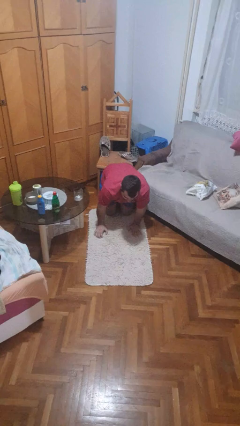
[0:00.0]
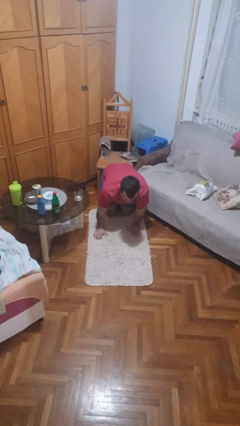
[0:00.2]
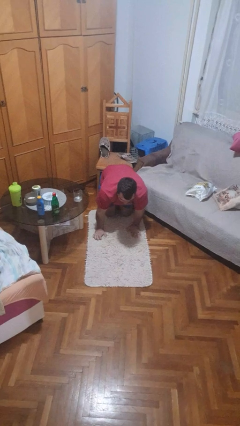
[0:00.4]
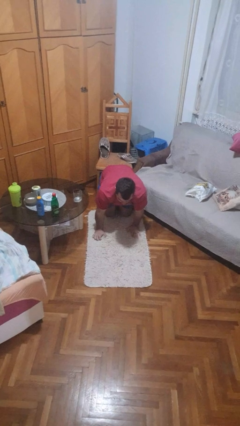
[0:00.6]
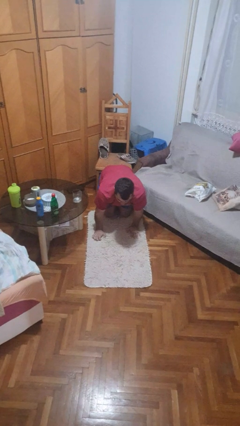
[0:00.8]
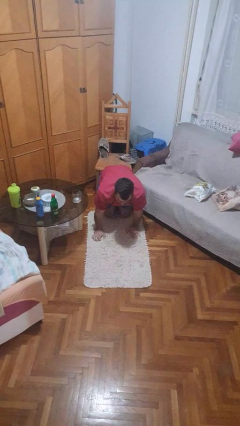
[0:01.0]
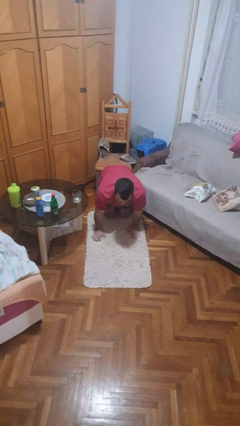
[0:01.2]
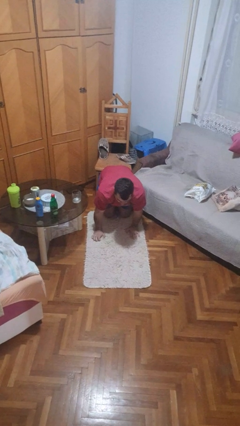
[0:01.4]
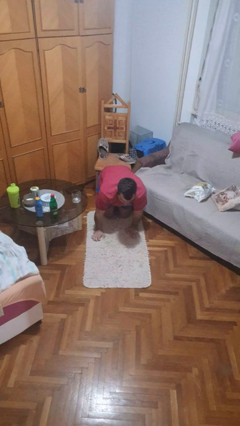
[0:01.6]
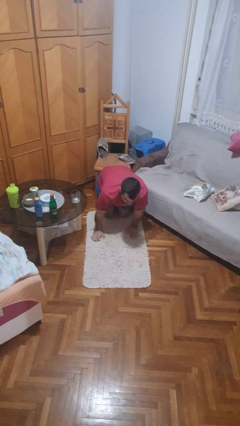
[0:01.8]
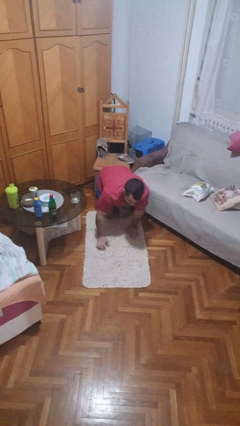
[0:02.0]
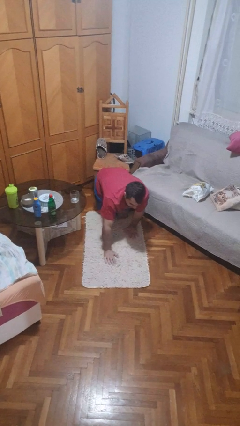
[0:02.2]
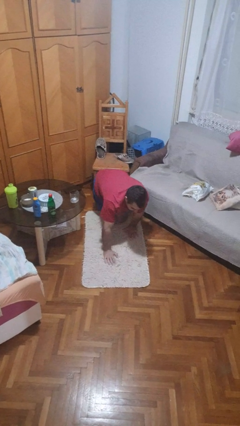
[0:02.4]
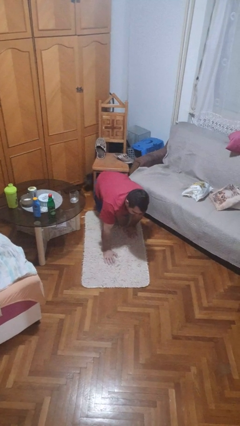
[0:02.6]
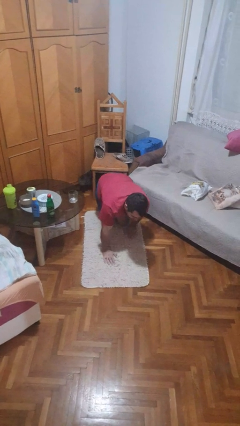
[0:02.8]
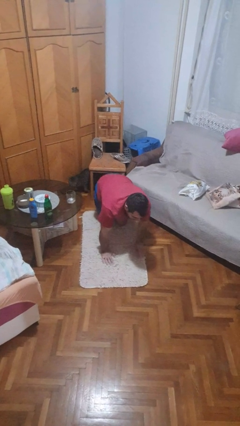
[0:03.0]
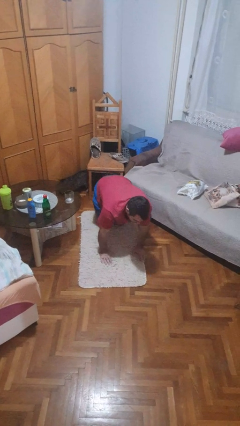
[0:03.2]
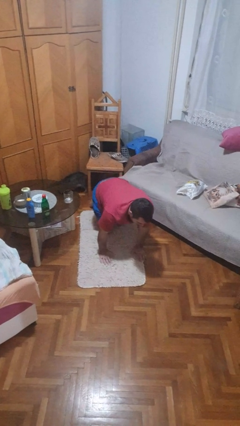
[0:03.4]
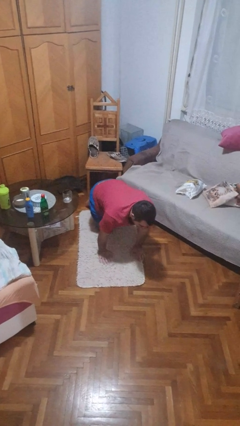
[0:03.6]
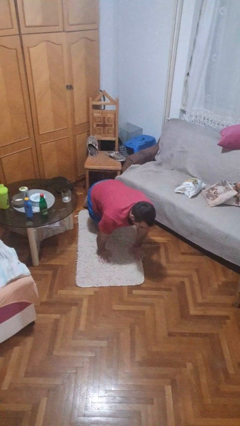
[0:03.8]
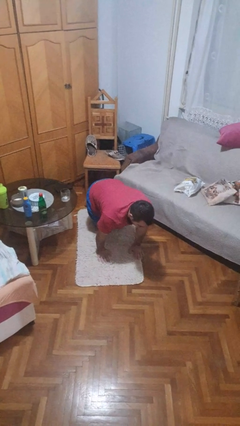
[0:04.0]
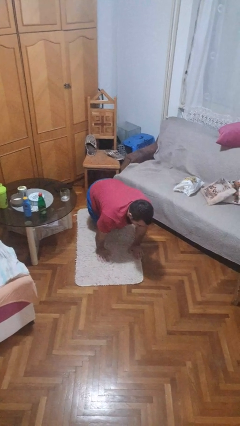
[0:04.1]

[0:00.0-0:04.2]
person crawls

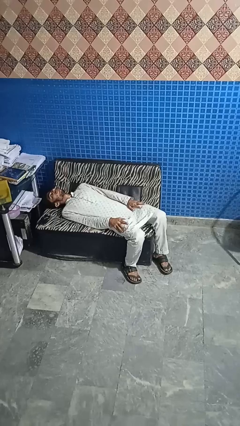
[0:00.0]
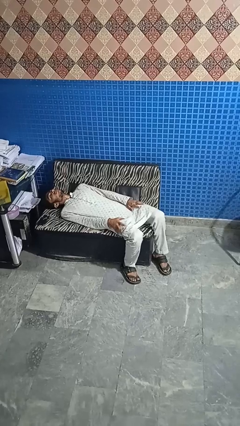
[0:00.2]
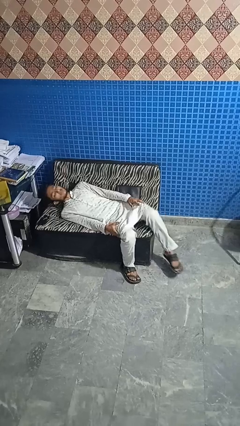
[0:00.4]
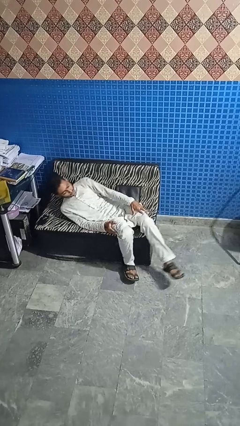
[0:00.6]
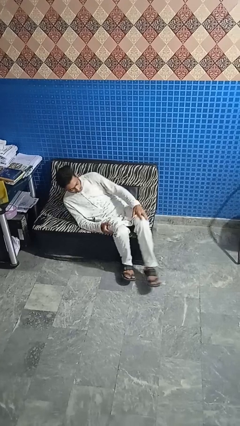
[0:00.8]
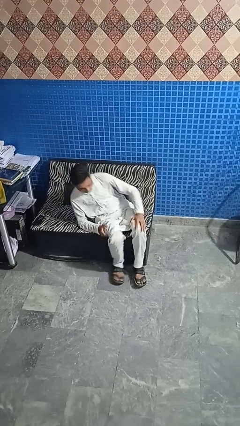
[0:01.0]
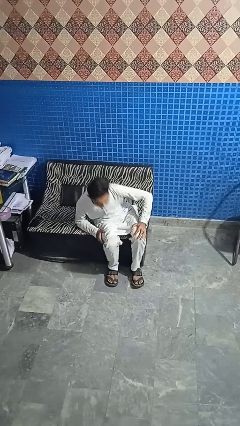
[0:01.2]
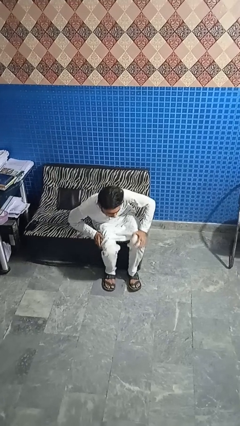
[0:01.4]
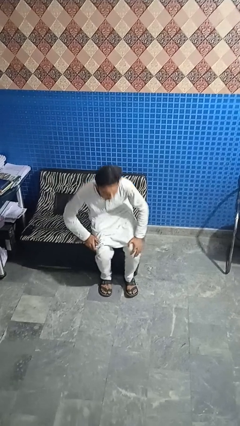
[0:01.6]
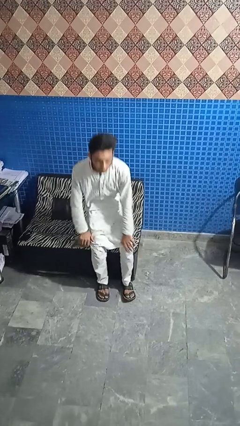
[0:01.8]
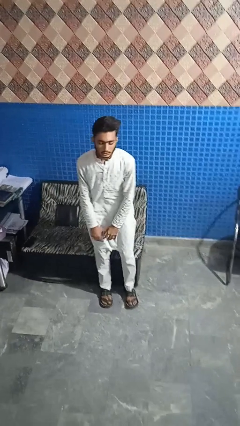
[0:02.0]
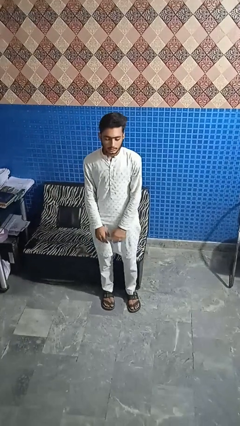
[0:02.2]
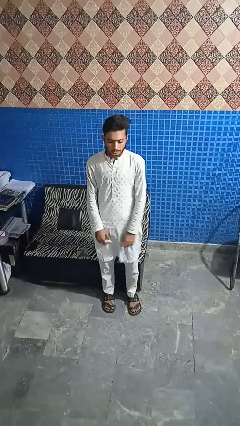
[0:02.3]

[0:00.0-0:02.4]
person stands up

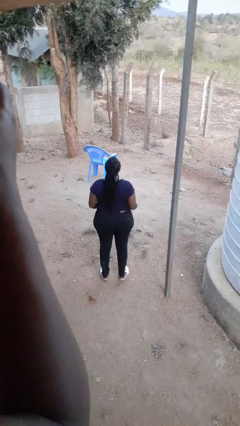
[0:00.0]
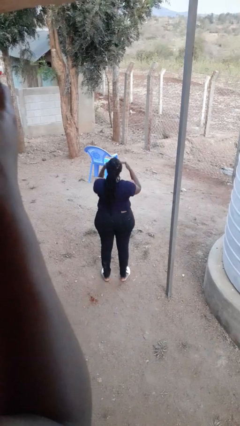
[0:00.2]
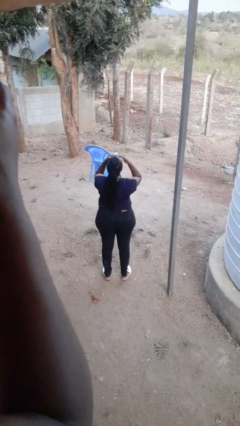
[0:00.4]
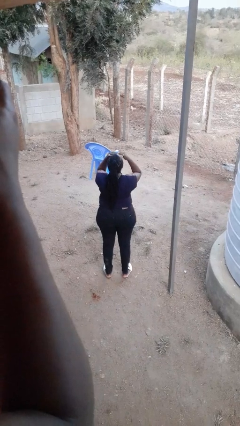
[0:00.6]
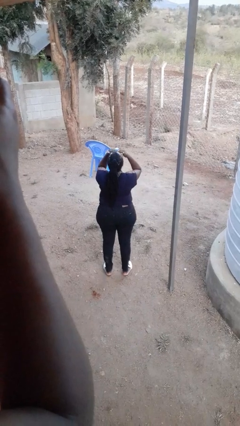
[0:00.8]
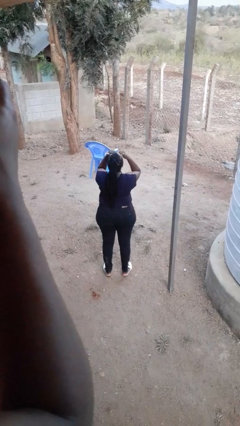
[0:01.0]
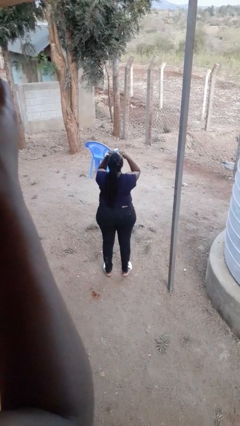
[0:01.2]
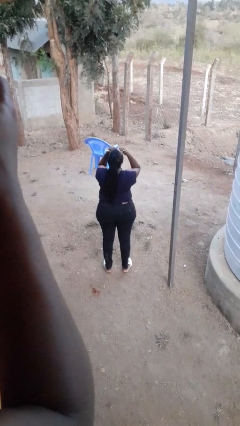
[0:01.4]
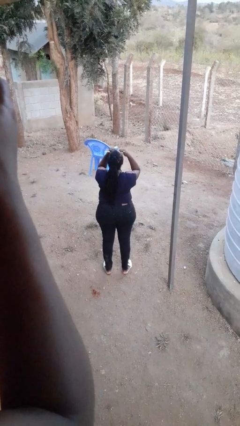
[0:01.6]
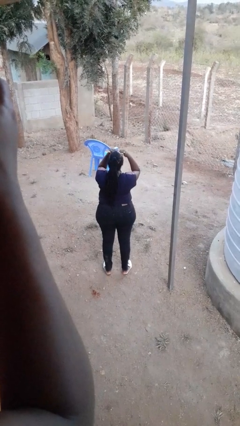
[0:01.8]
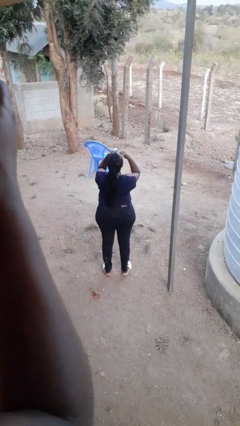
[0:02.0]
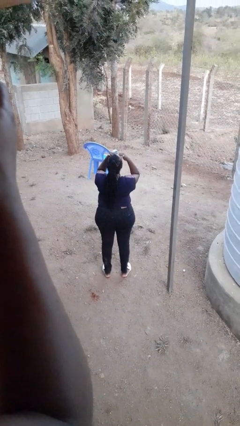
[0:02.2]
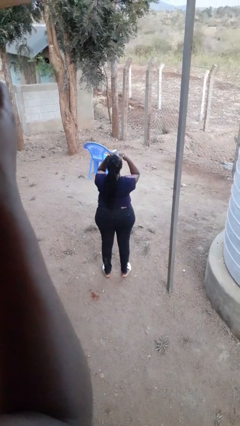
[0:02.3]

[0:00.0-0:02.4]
person shades eyes

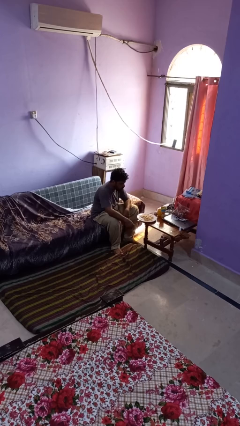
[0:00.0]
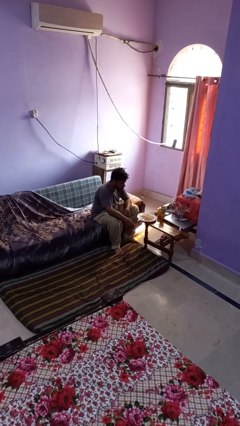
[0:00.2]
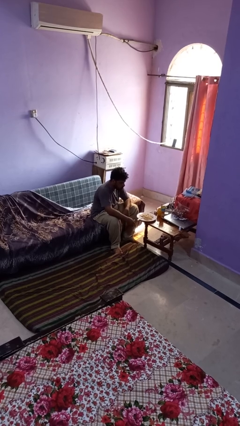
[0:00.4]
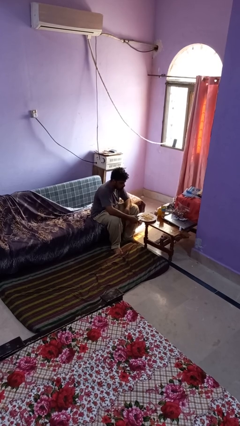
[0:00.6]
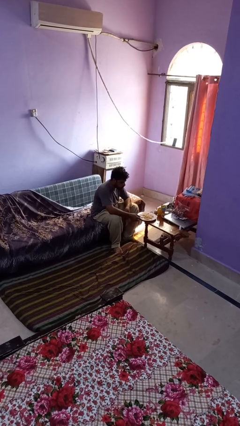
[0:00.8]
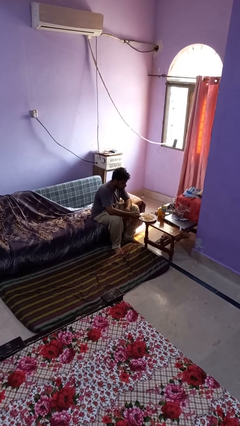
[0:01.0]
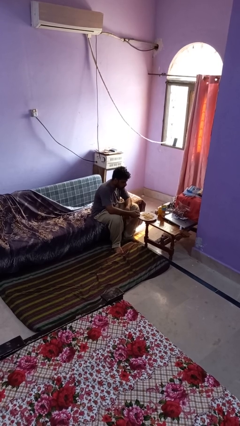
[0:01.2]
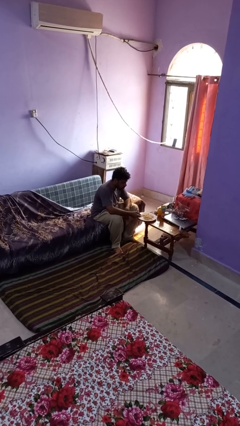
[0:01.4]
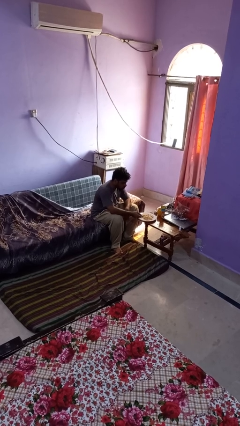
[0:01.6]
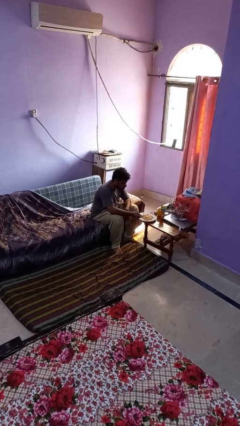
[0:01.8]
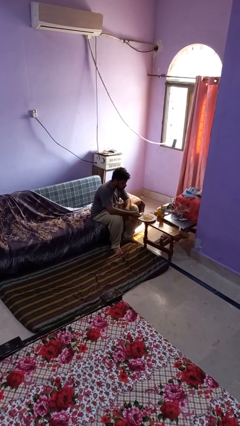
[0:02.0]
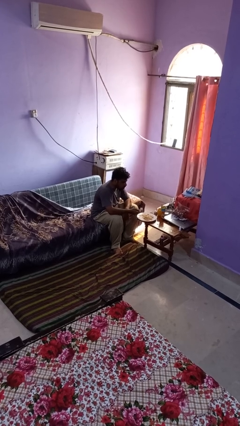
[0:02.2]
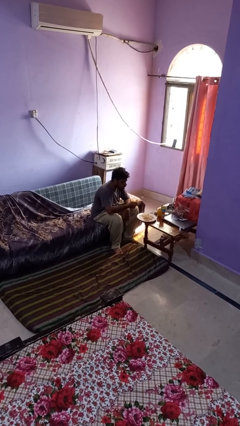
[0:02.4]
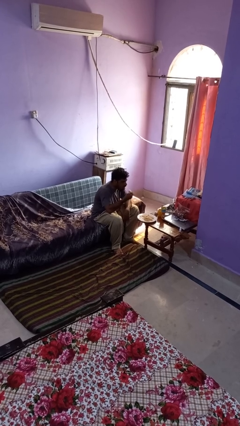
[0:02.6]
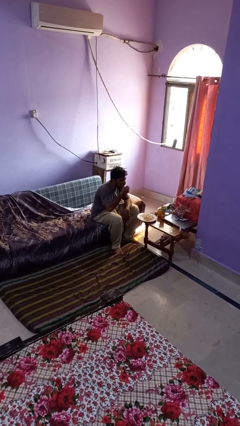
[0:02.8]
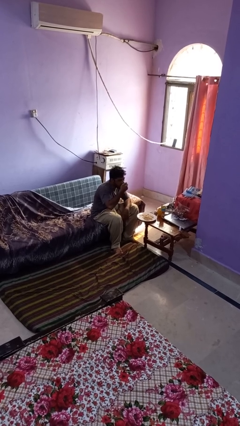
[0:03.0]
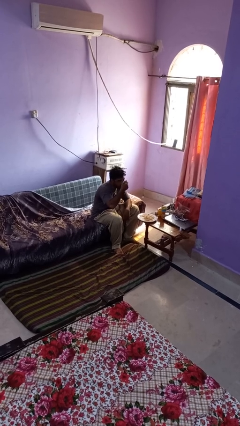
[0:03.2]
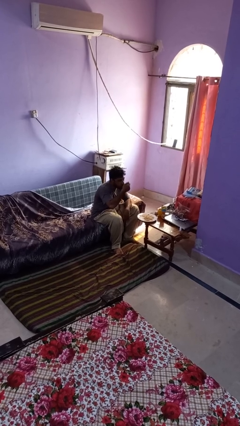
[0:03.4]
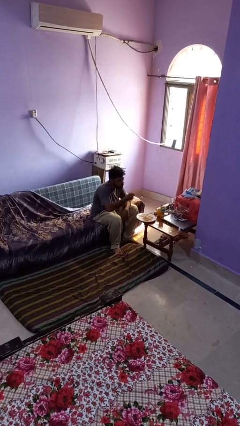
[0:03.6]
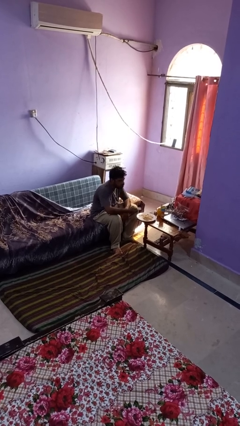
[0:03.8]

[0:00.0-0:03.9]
person eats with utensil

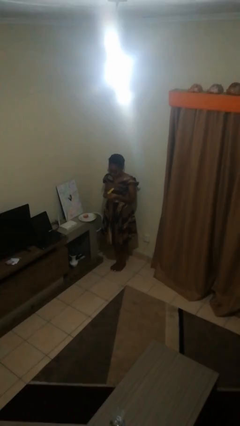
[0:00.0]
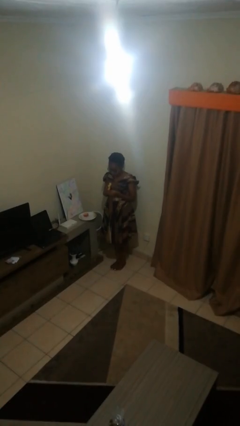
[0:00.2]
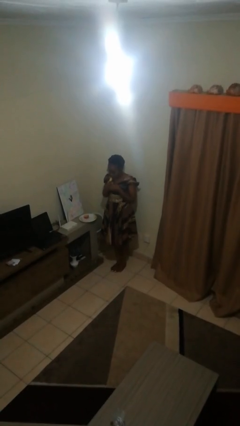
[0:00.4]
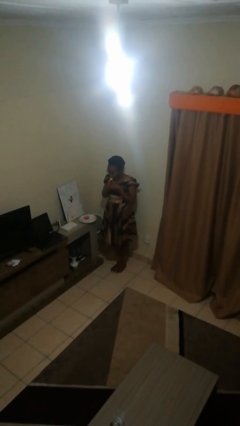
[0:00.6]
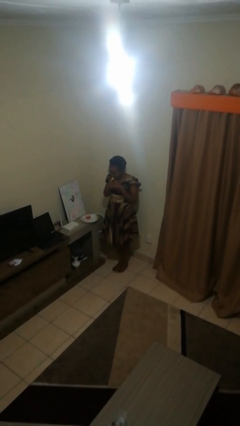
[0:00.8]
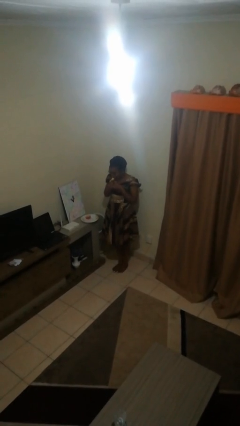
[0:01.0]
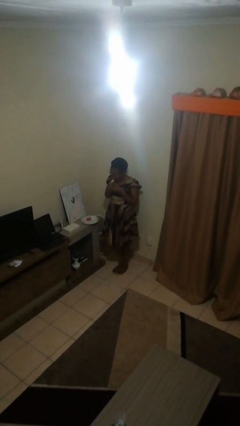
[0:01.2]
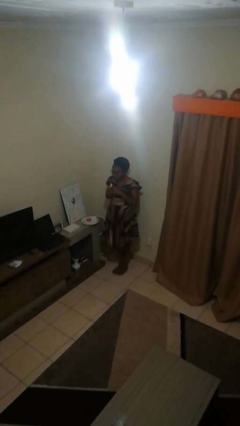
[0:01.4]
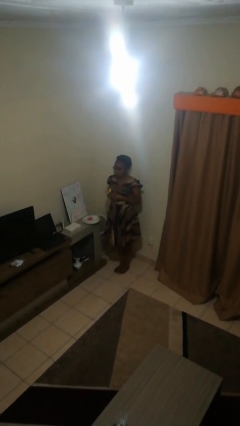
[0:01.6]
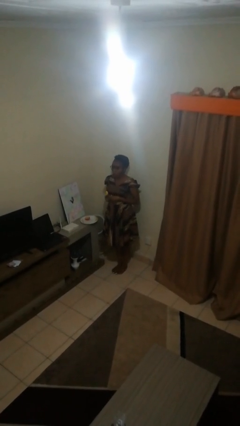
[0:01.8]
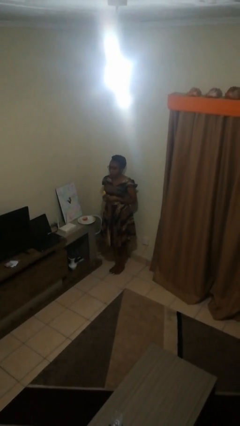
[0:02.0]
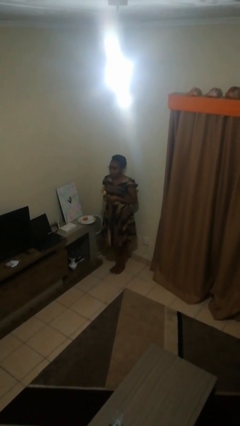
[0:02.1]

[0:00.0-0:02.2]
person eats banana

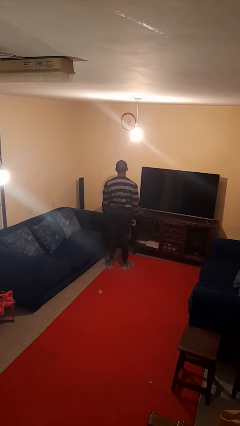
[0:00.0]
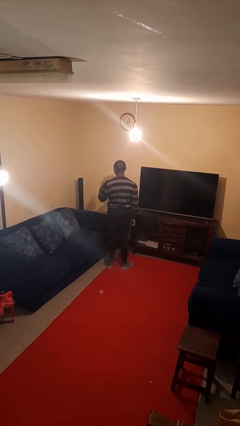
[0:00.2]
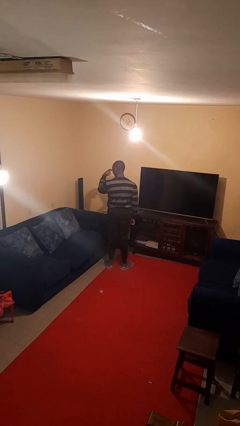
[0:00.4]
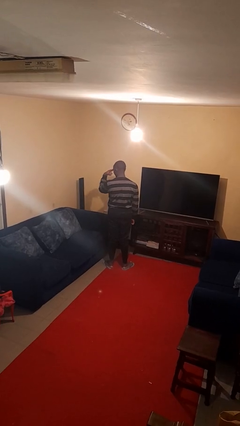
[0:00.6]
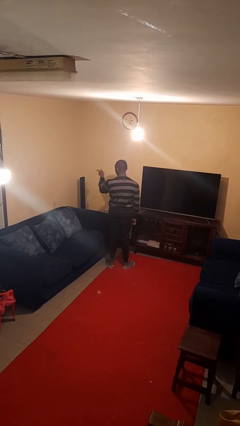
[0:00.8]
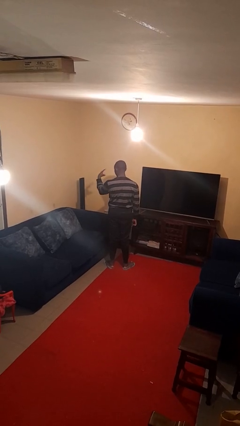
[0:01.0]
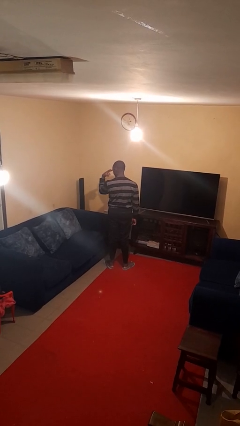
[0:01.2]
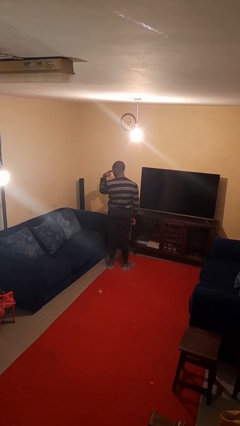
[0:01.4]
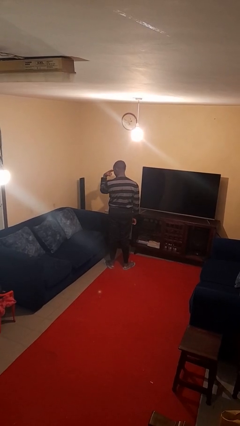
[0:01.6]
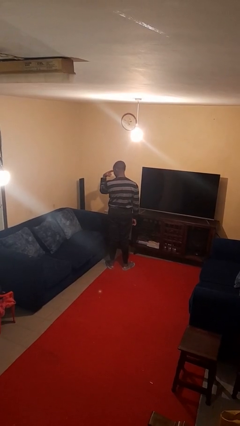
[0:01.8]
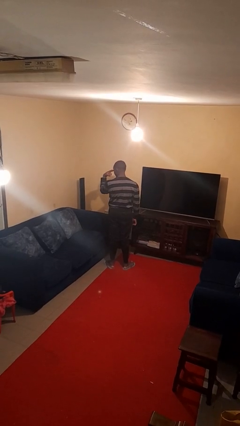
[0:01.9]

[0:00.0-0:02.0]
person gestures watch closely

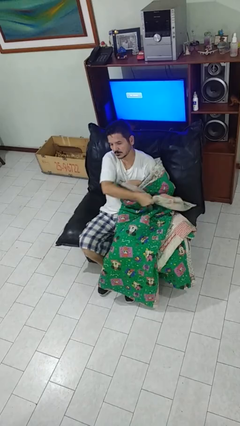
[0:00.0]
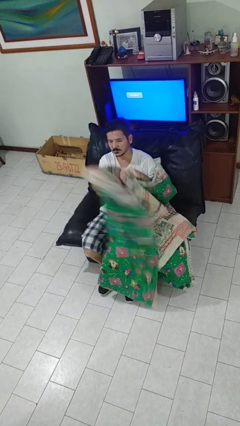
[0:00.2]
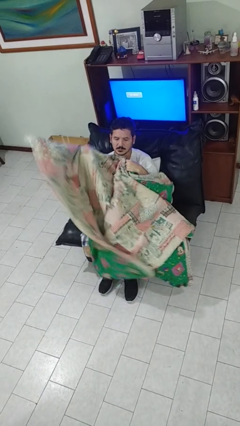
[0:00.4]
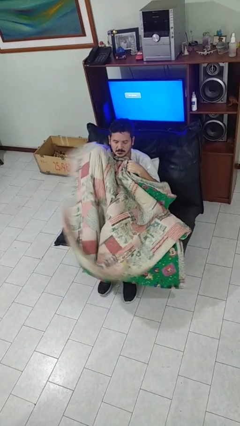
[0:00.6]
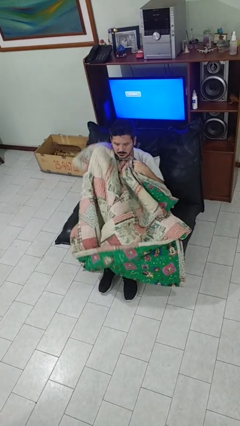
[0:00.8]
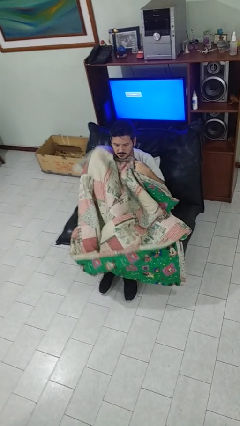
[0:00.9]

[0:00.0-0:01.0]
person covers with blanket
